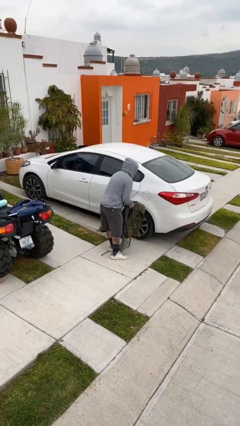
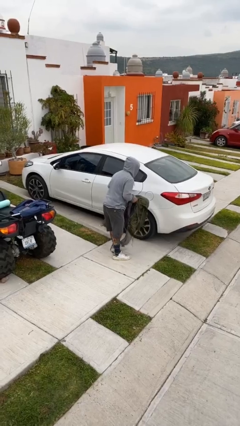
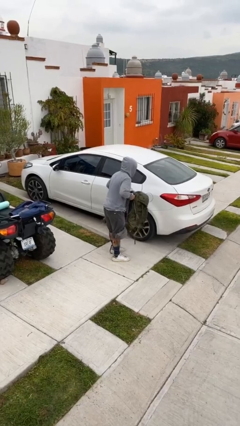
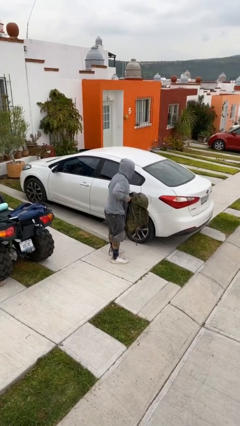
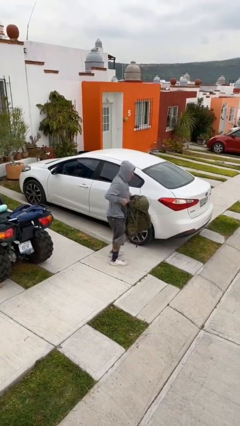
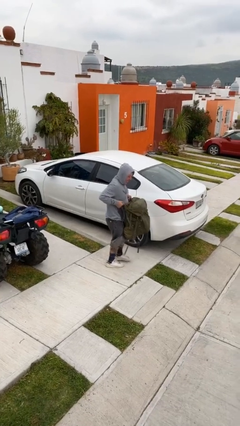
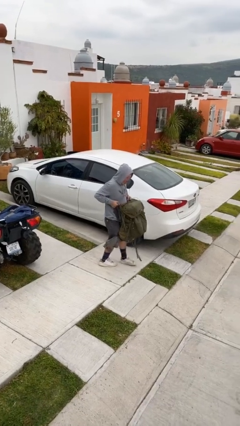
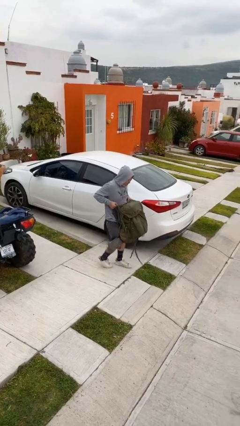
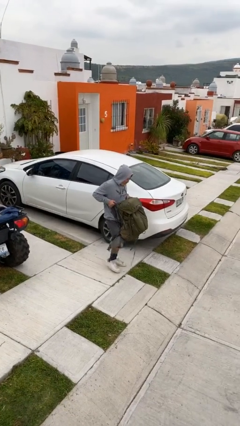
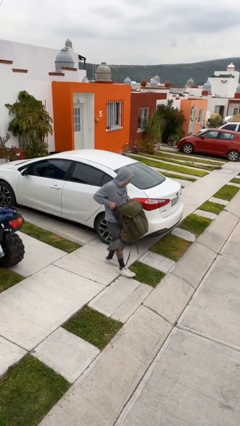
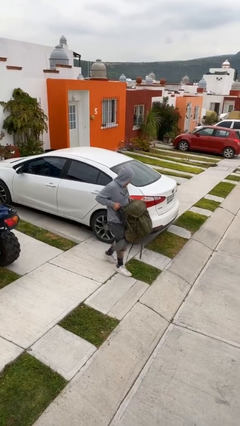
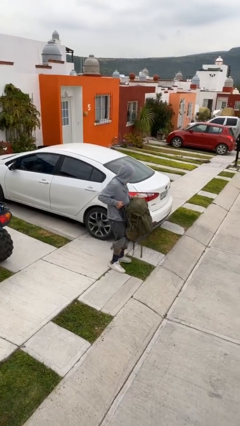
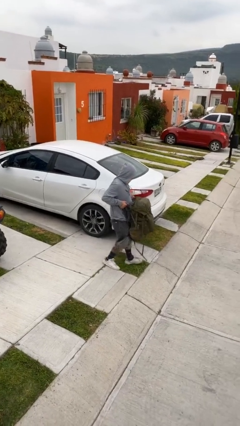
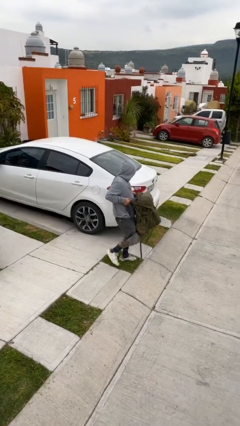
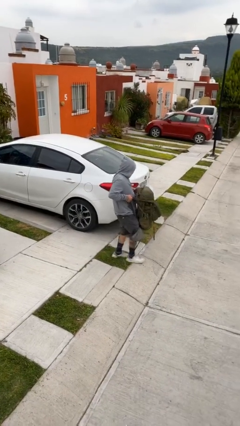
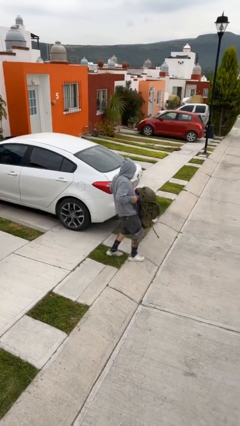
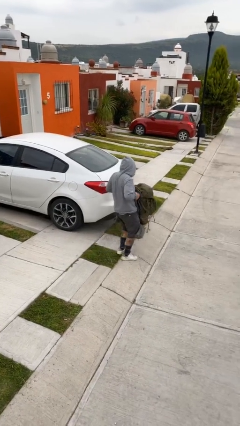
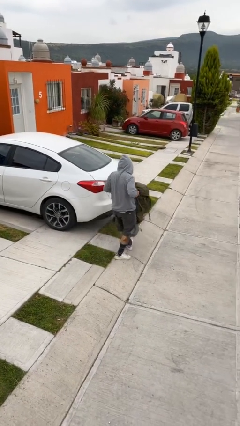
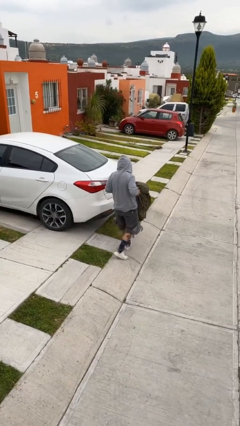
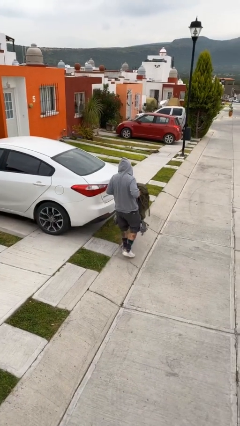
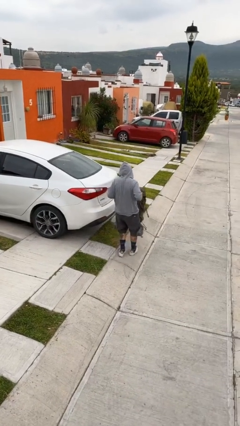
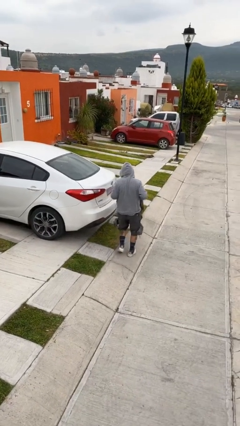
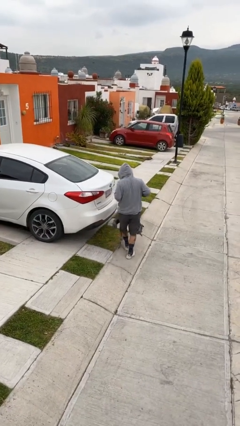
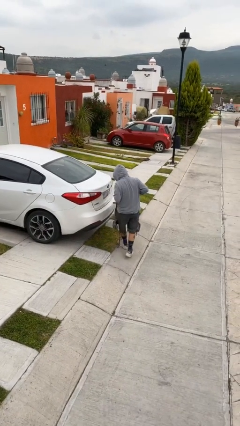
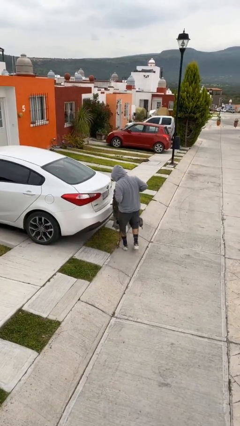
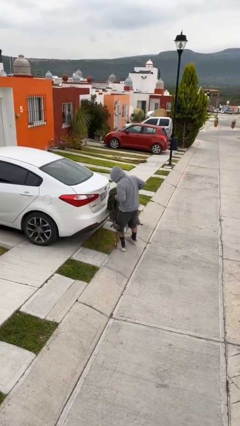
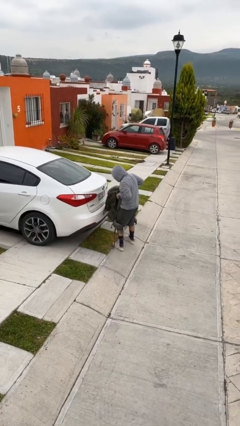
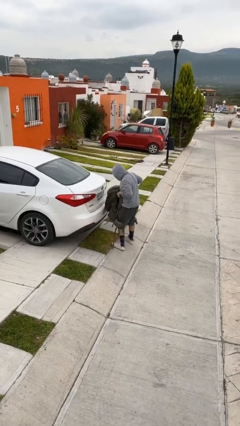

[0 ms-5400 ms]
person carries heavy object

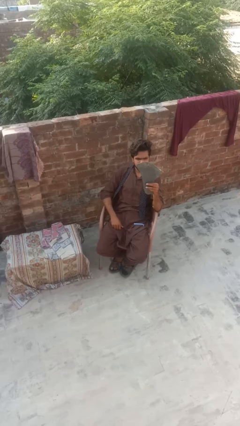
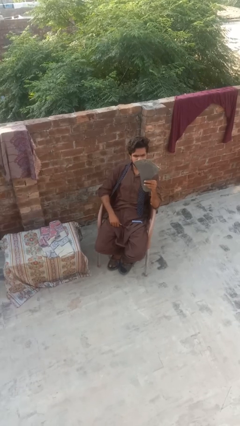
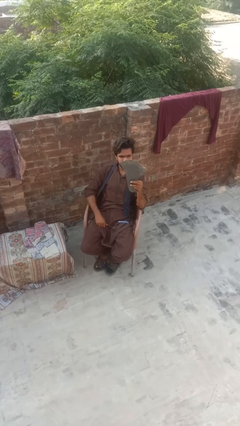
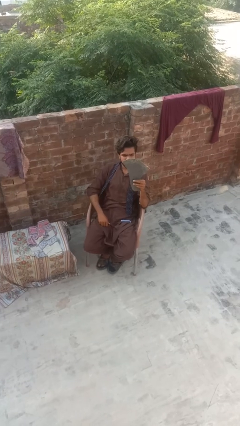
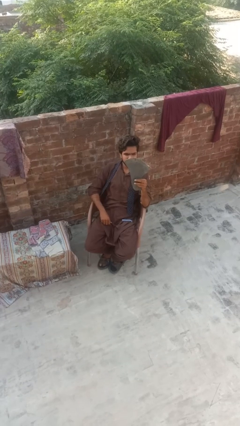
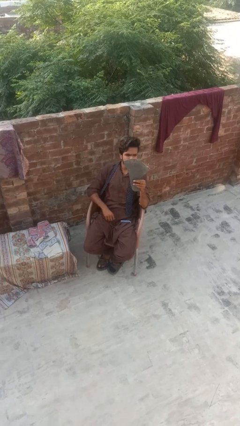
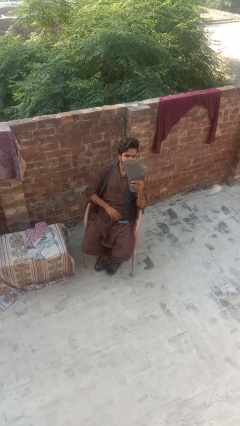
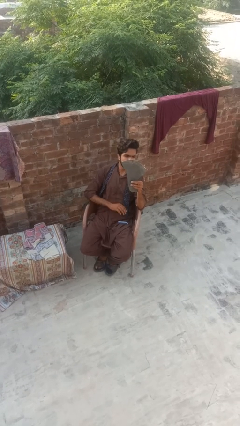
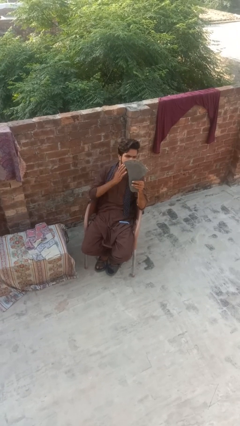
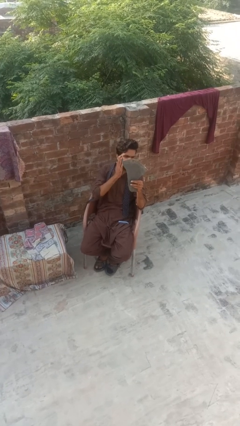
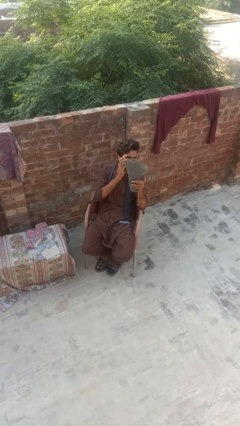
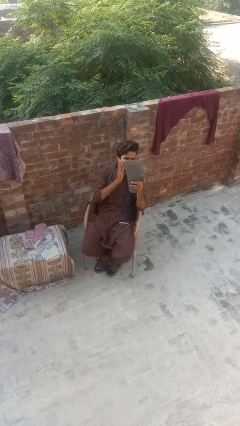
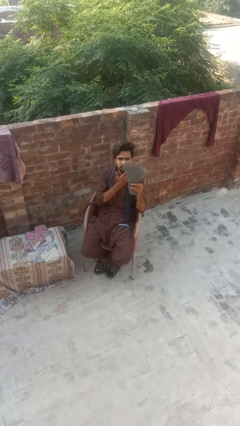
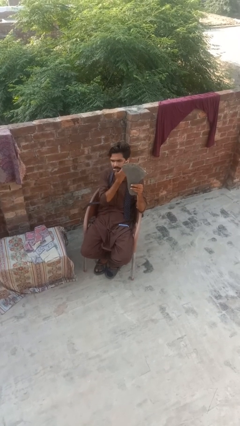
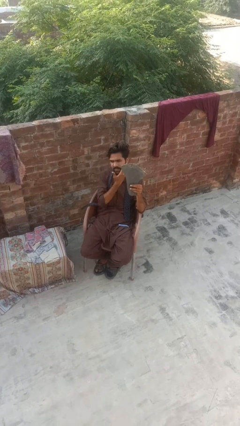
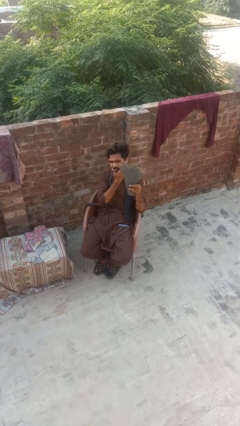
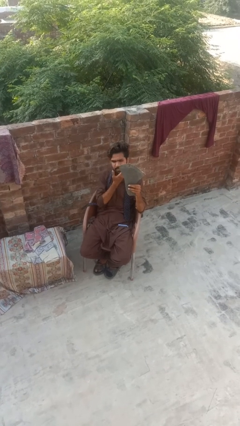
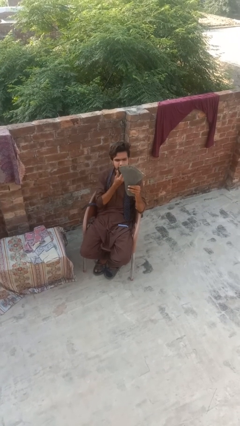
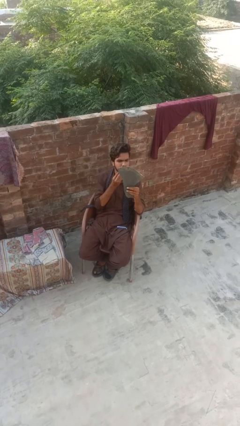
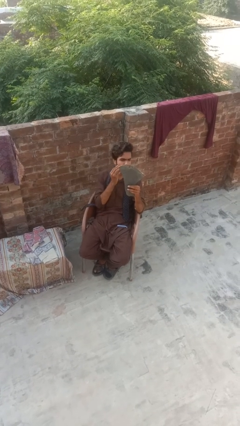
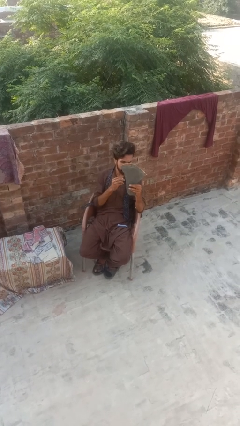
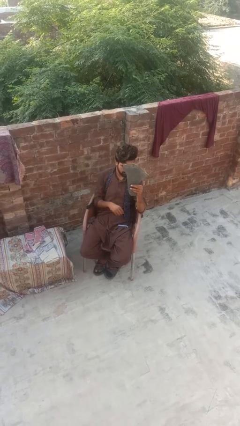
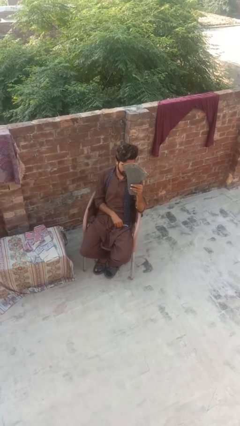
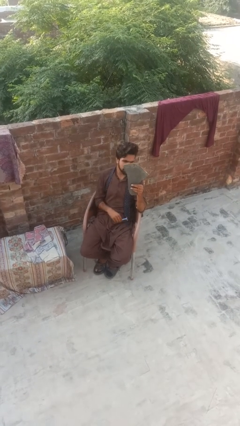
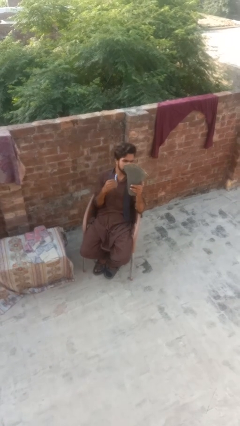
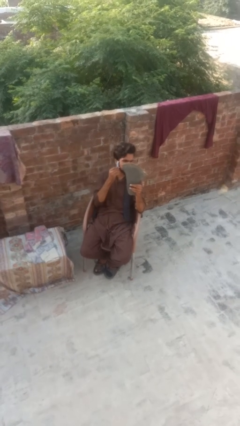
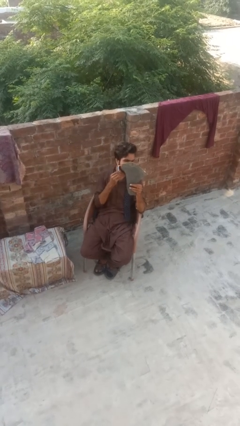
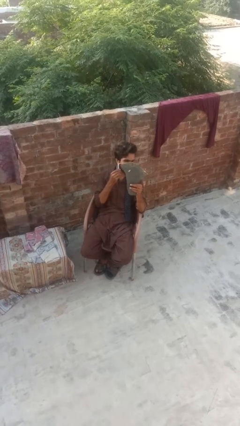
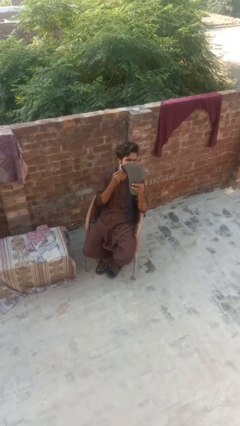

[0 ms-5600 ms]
person applies shaving cream

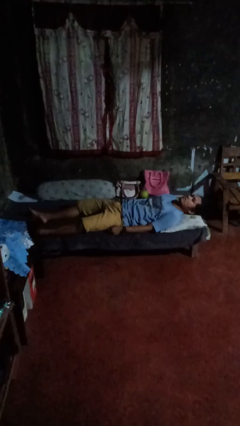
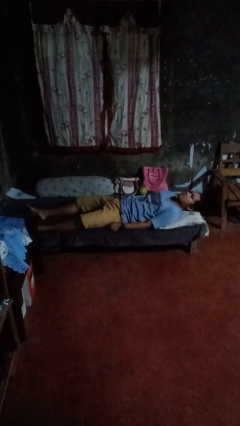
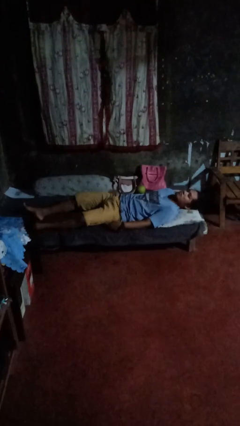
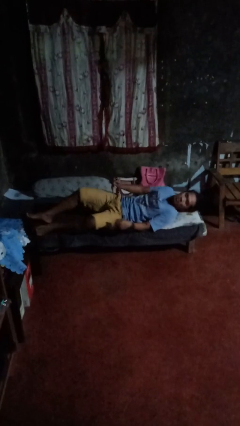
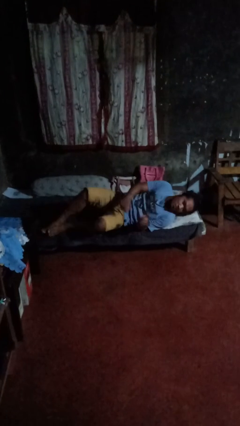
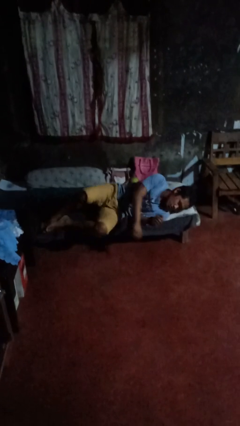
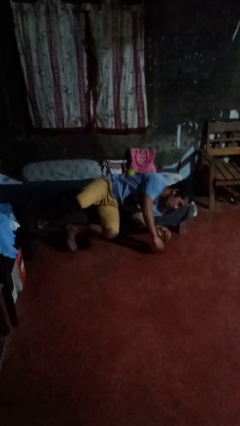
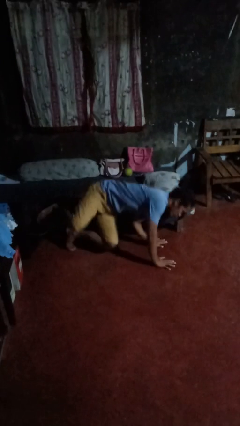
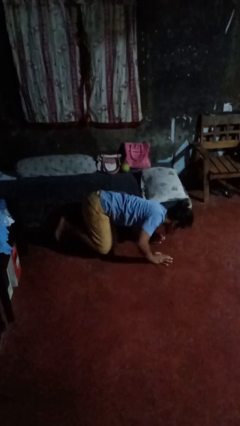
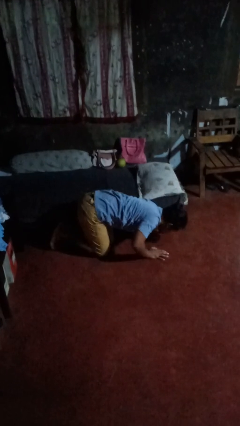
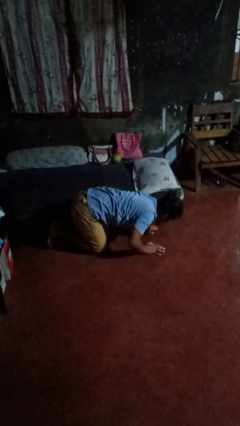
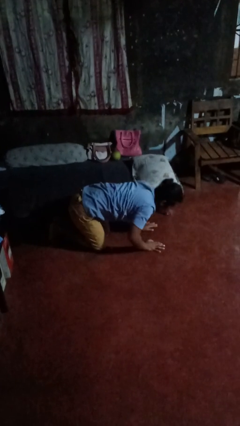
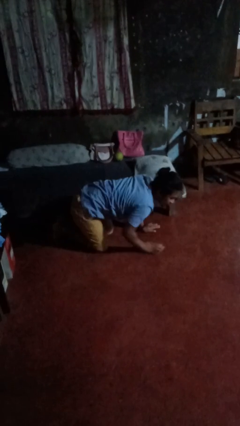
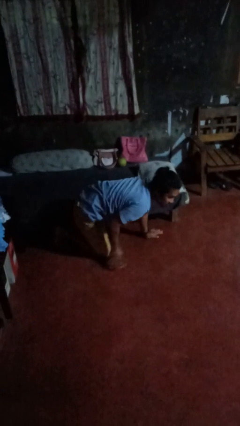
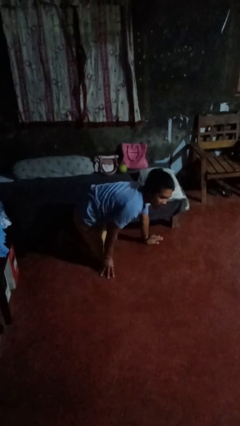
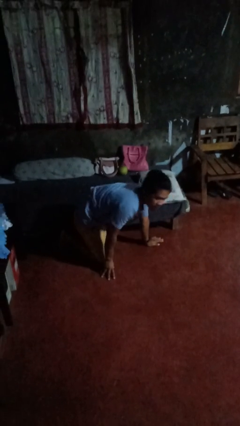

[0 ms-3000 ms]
person falls from bed

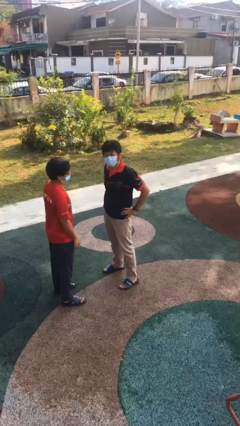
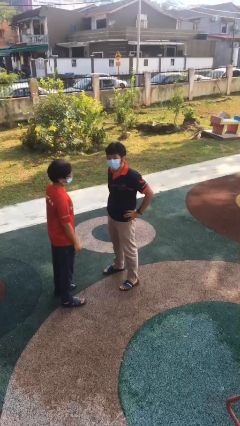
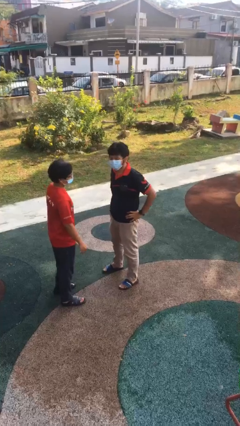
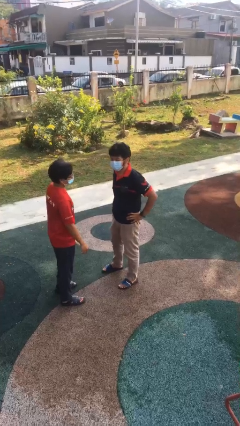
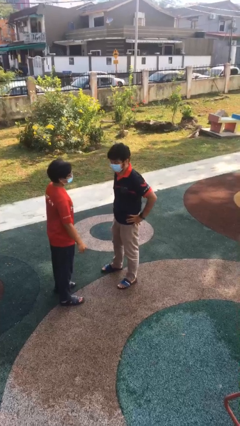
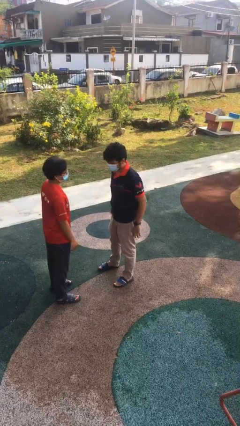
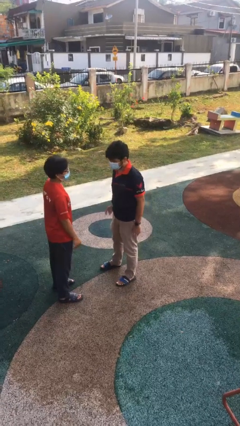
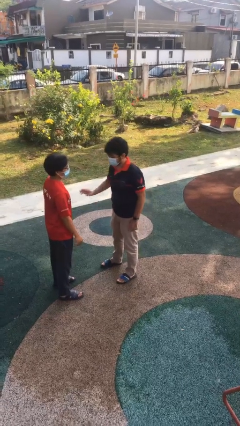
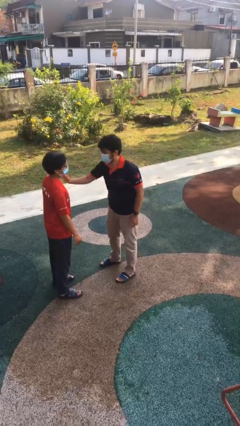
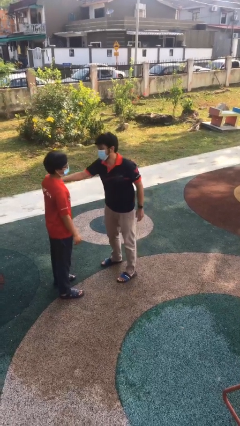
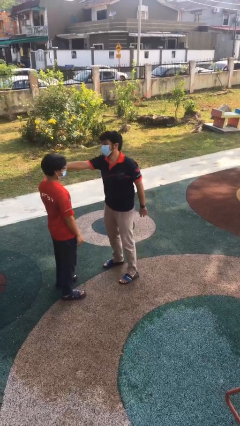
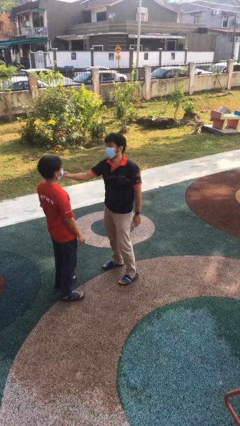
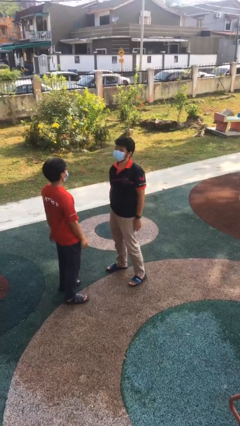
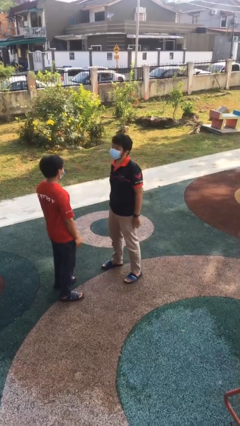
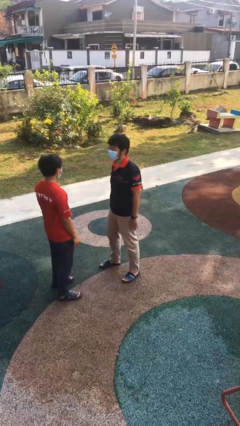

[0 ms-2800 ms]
person shoves person

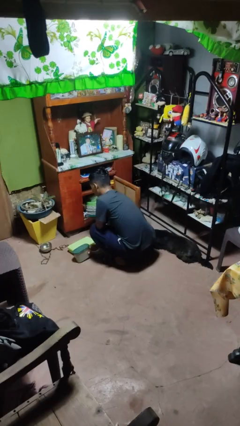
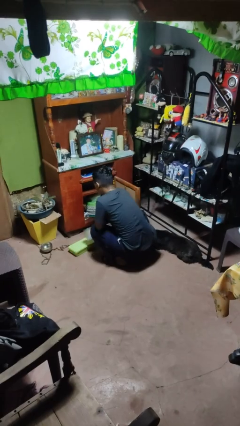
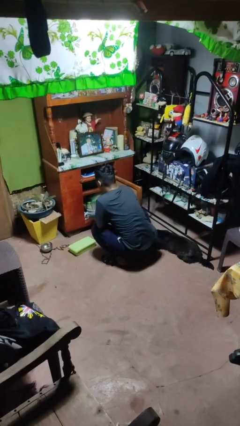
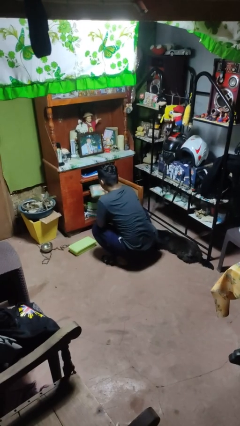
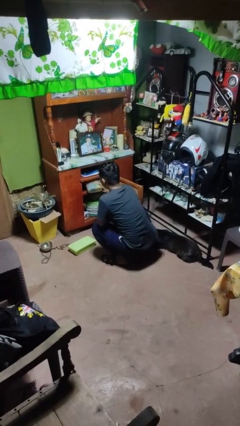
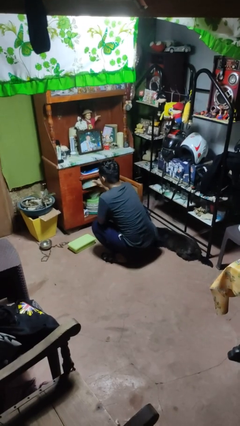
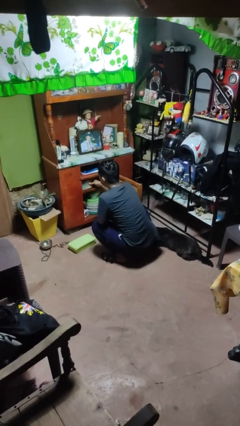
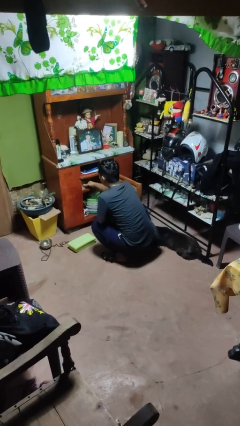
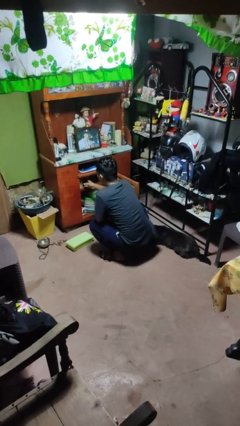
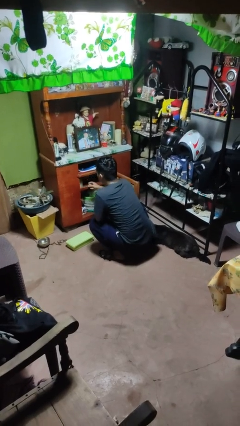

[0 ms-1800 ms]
person puts object in cabinet
